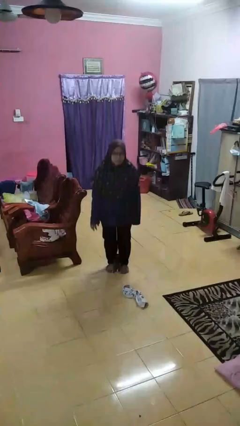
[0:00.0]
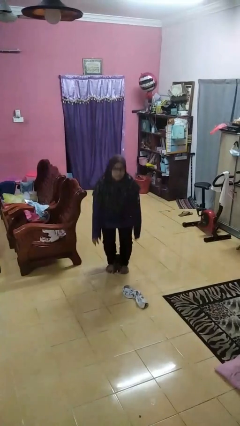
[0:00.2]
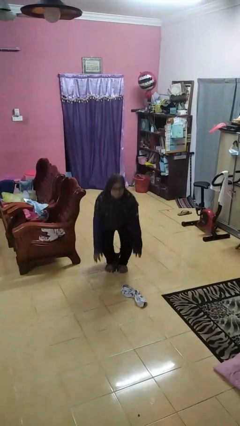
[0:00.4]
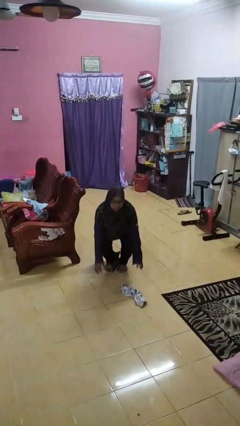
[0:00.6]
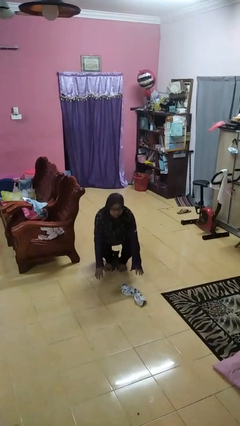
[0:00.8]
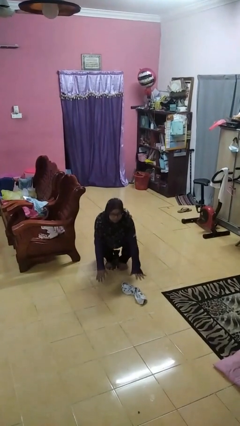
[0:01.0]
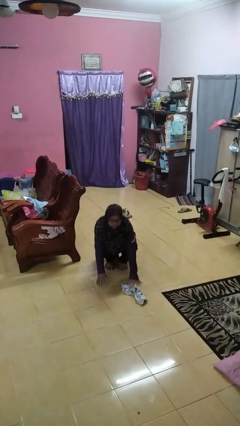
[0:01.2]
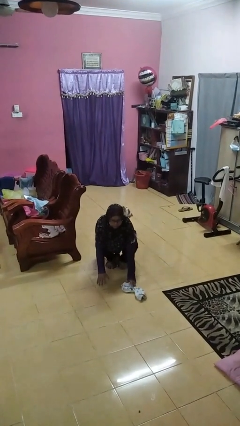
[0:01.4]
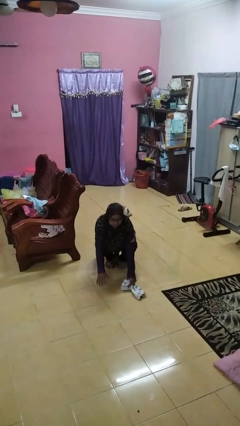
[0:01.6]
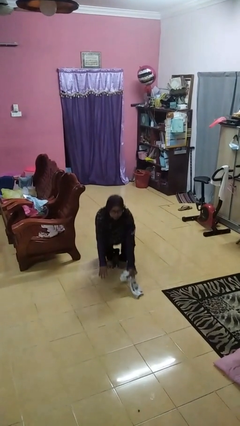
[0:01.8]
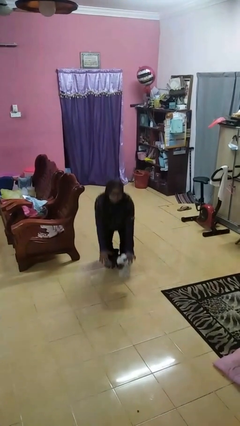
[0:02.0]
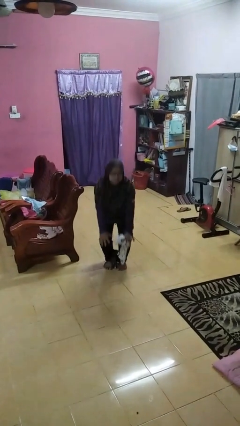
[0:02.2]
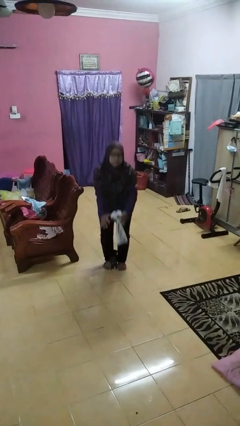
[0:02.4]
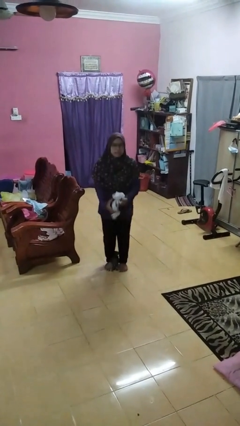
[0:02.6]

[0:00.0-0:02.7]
person picks up object from floor

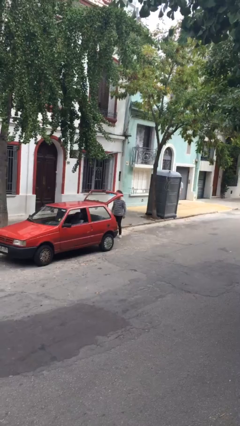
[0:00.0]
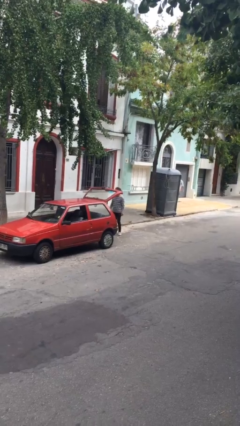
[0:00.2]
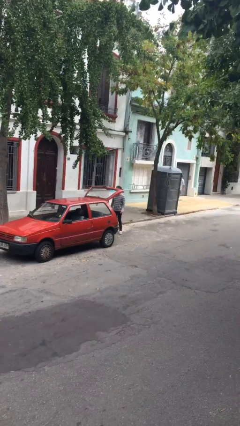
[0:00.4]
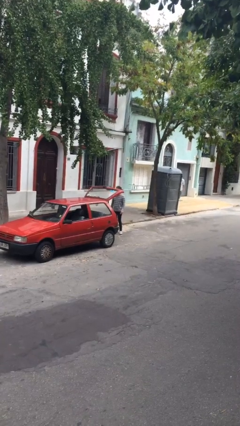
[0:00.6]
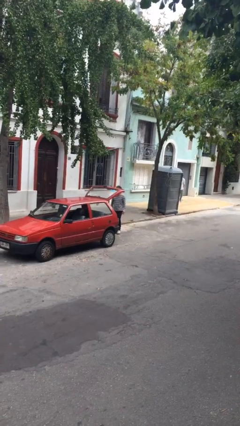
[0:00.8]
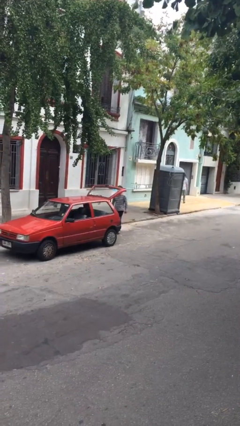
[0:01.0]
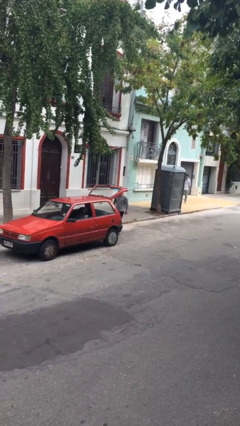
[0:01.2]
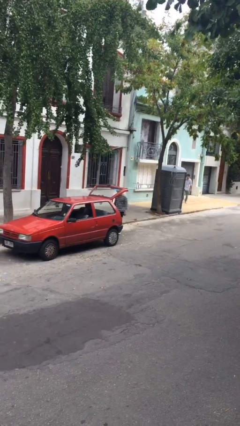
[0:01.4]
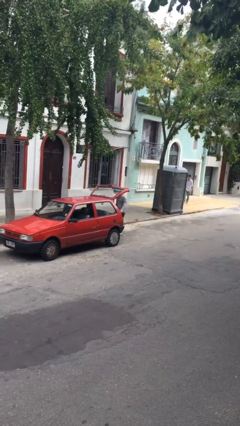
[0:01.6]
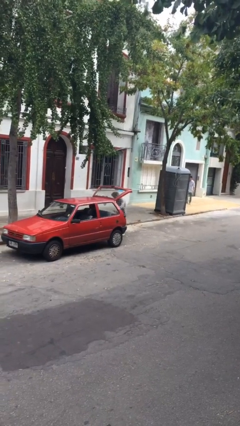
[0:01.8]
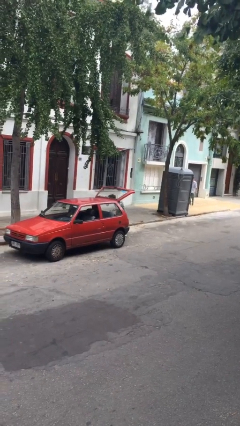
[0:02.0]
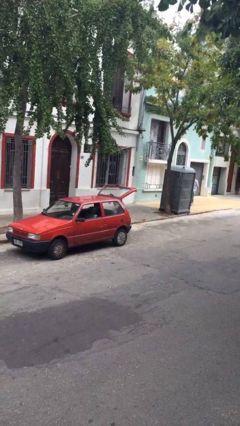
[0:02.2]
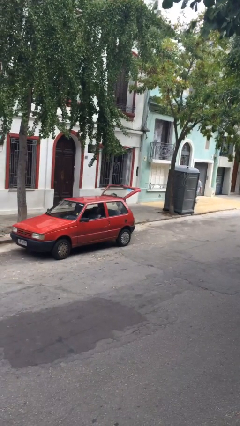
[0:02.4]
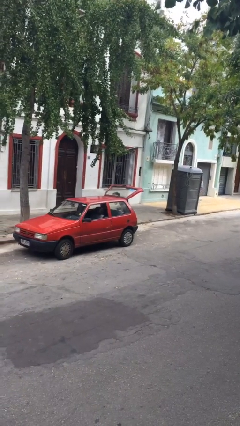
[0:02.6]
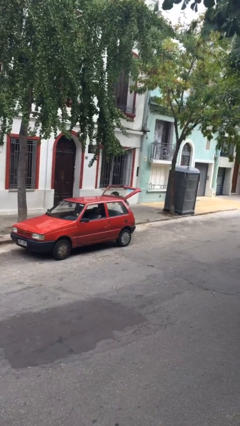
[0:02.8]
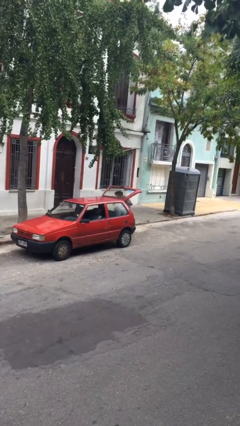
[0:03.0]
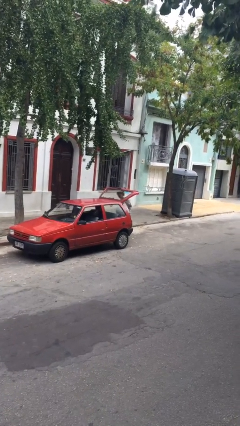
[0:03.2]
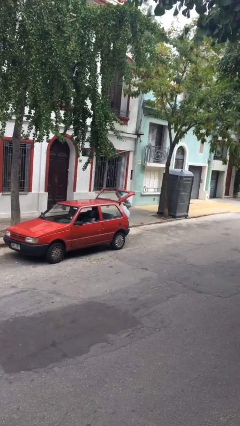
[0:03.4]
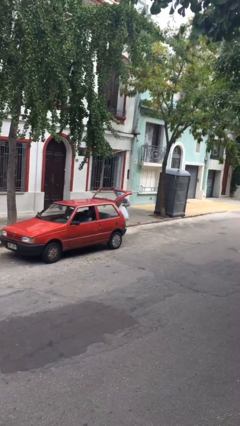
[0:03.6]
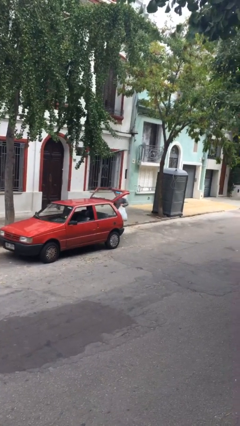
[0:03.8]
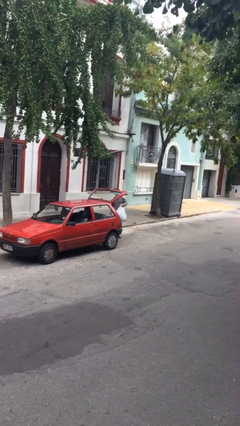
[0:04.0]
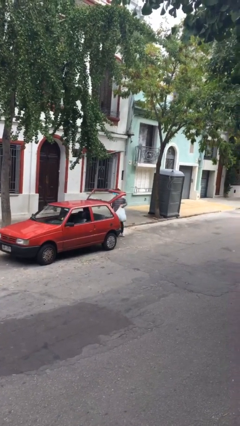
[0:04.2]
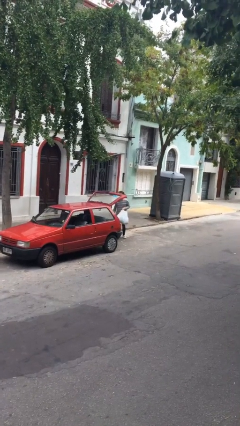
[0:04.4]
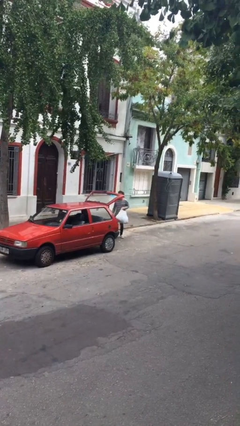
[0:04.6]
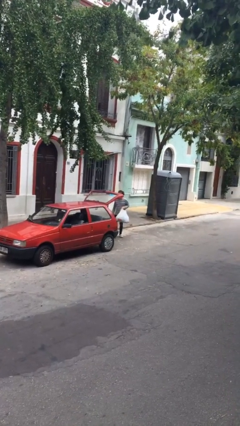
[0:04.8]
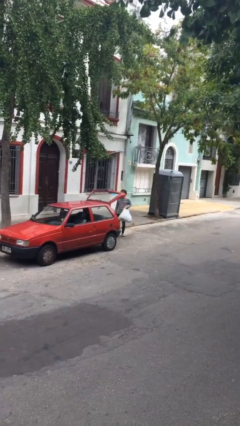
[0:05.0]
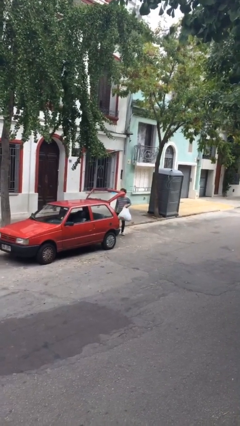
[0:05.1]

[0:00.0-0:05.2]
person unloads car

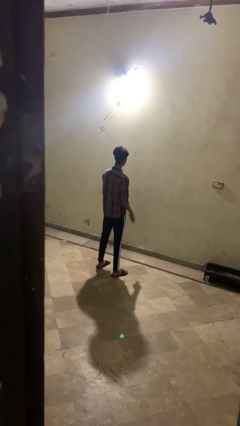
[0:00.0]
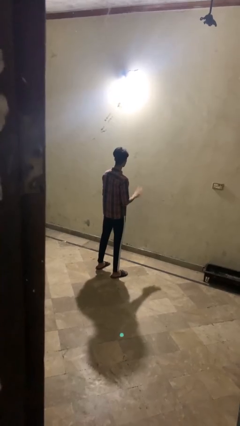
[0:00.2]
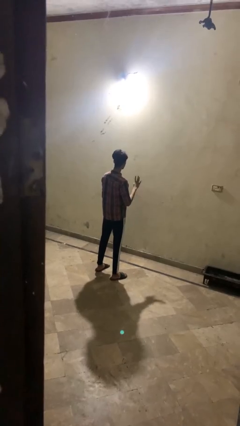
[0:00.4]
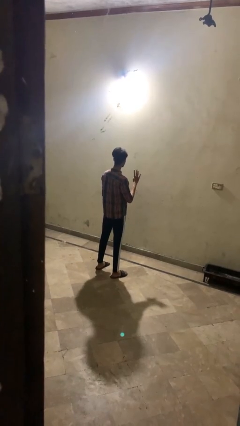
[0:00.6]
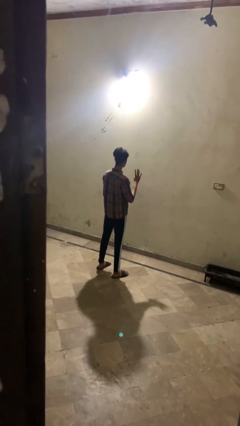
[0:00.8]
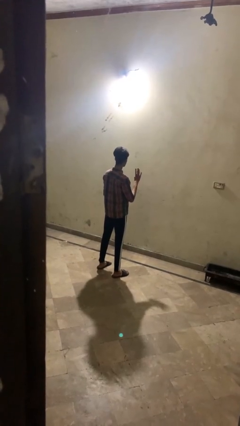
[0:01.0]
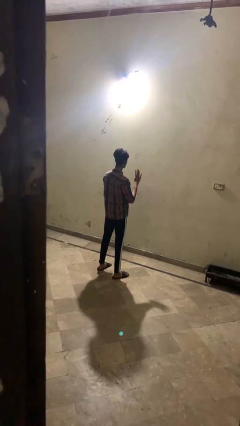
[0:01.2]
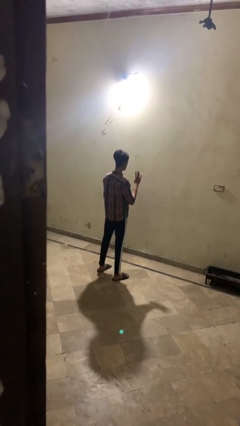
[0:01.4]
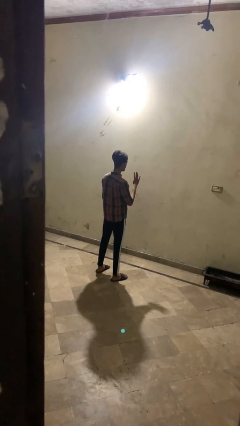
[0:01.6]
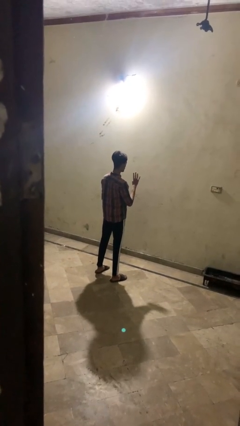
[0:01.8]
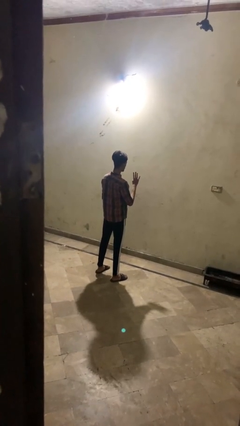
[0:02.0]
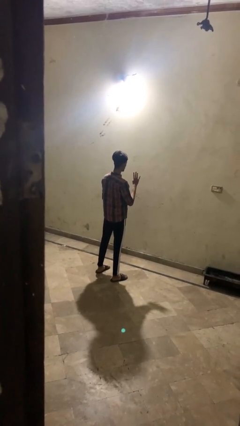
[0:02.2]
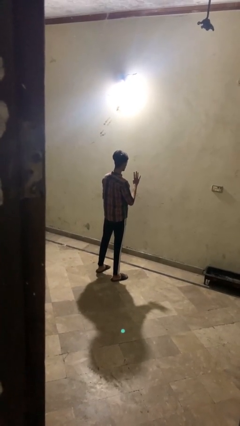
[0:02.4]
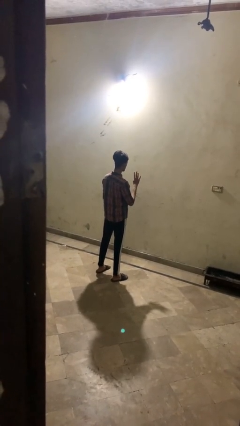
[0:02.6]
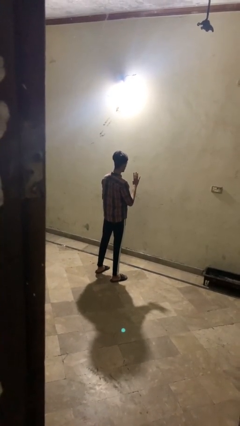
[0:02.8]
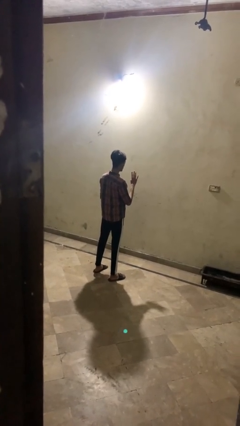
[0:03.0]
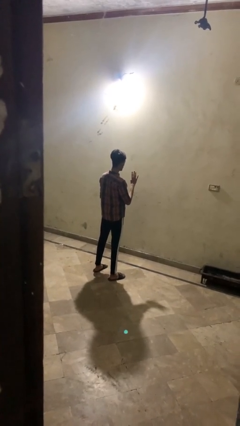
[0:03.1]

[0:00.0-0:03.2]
person gestures number four

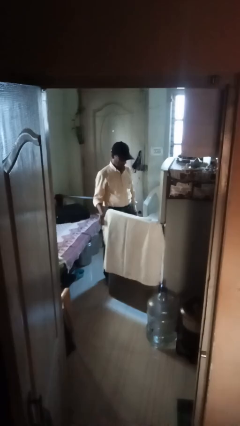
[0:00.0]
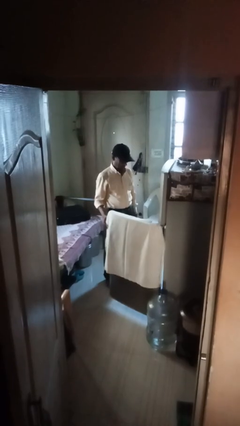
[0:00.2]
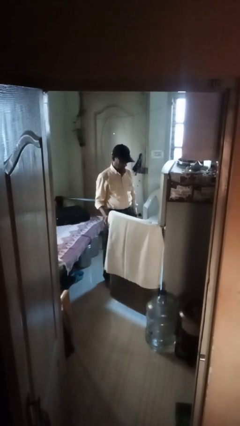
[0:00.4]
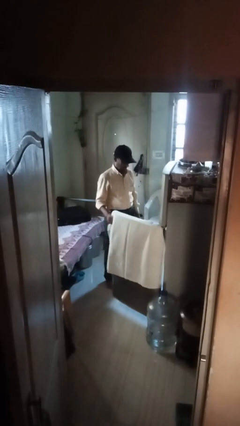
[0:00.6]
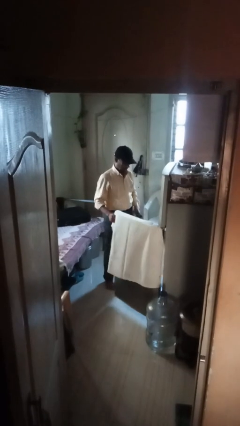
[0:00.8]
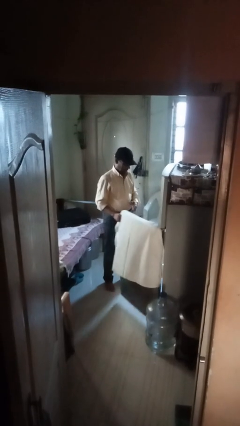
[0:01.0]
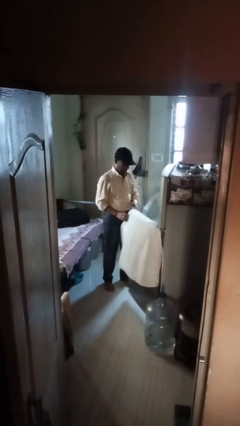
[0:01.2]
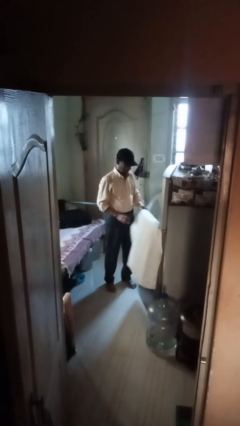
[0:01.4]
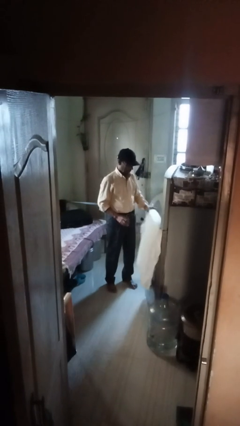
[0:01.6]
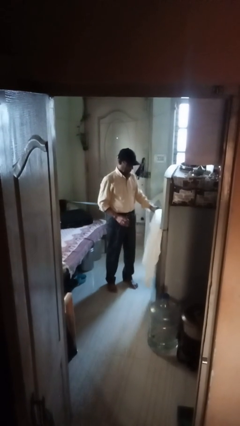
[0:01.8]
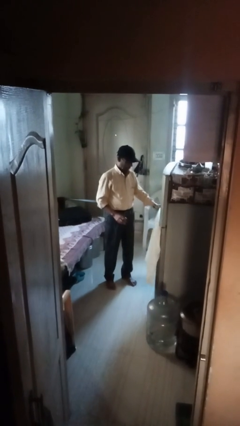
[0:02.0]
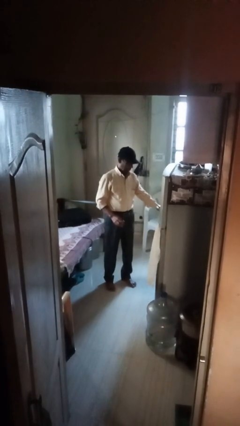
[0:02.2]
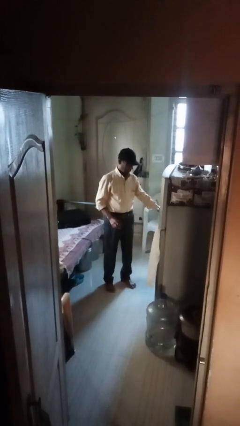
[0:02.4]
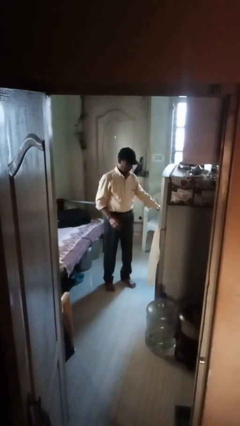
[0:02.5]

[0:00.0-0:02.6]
person closes clothes washer

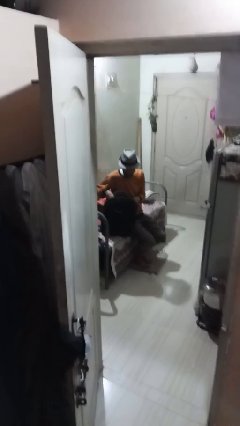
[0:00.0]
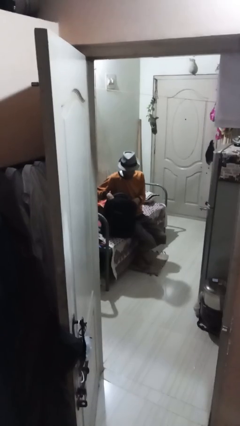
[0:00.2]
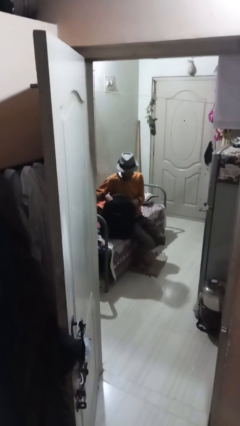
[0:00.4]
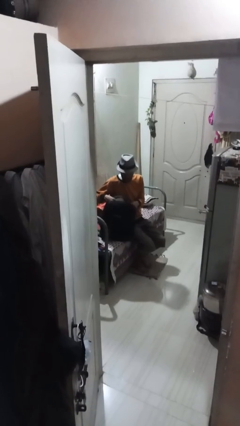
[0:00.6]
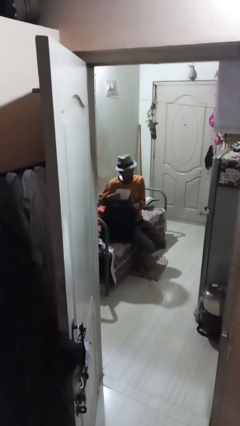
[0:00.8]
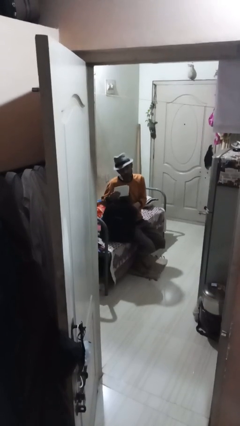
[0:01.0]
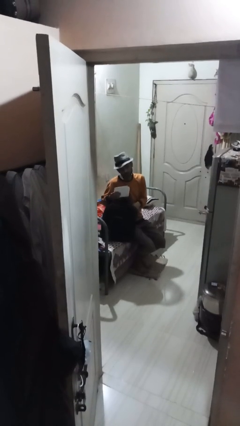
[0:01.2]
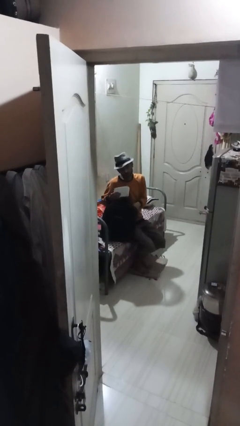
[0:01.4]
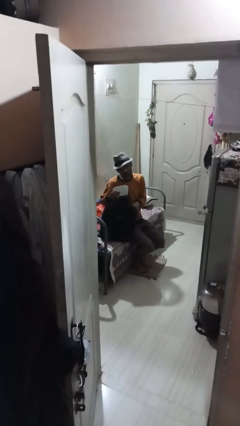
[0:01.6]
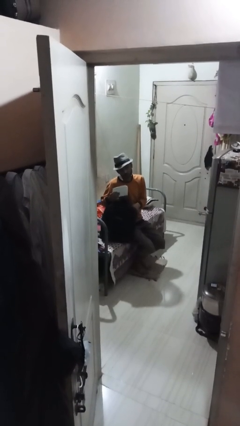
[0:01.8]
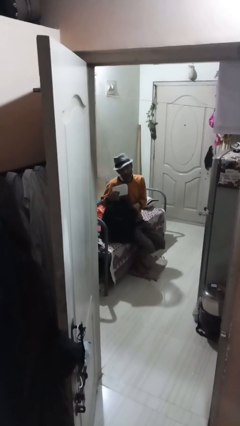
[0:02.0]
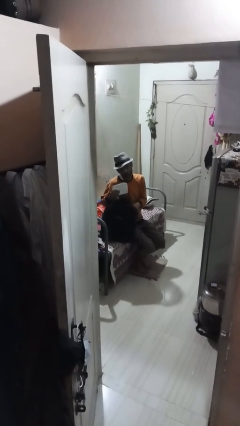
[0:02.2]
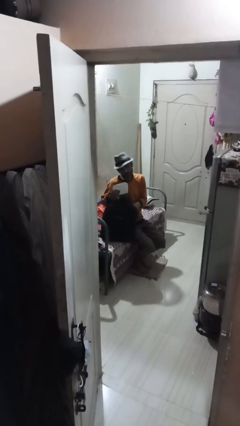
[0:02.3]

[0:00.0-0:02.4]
person takes object from backpack

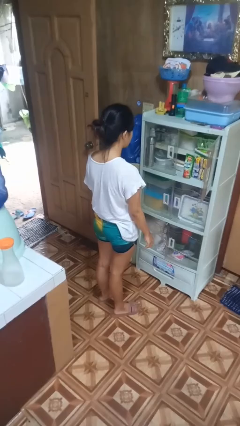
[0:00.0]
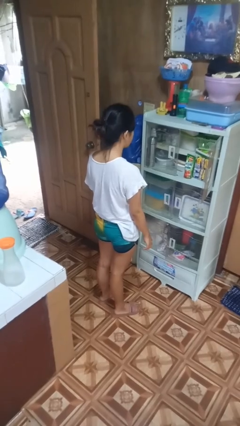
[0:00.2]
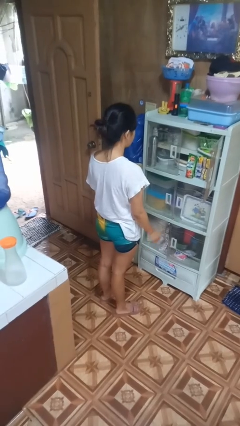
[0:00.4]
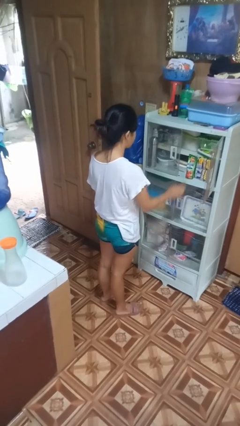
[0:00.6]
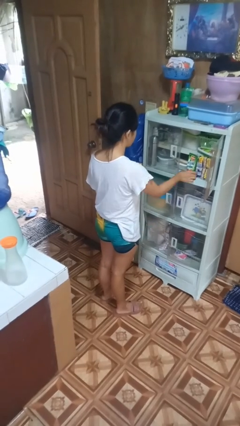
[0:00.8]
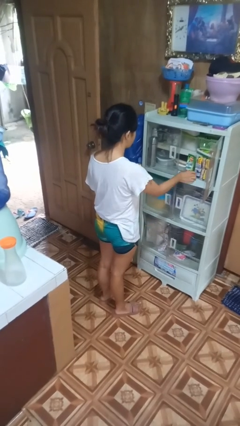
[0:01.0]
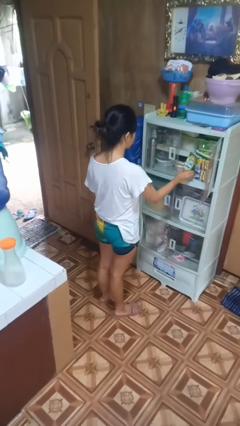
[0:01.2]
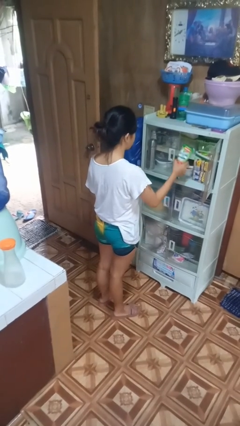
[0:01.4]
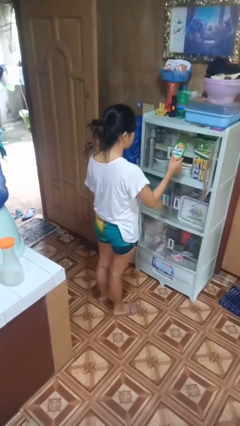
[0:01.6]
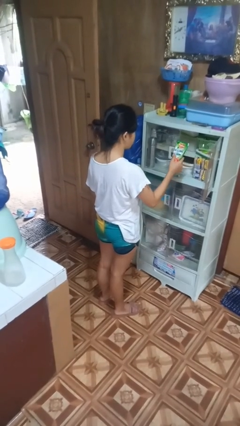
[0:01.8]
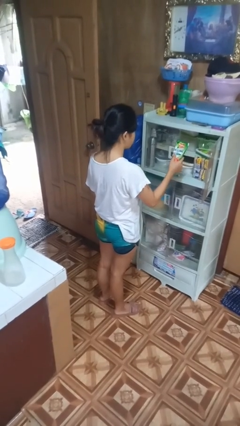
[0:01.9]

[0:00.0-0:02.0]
person picks up object from cabinet
